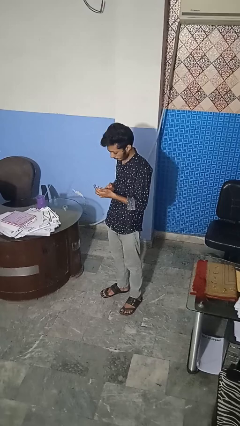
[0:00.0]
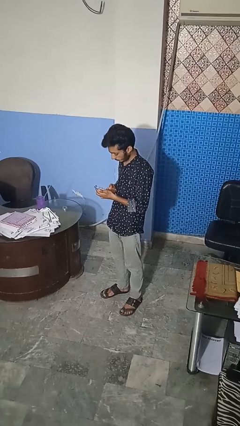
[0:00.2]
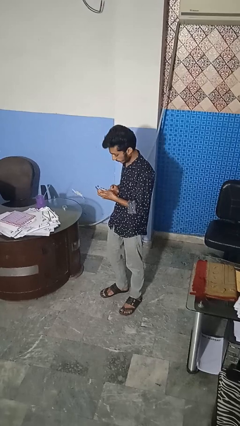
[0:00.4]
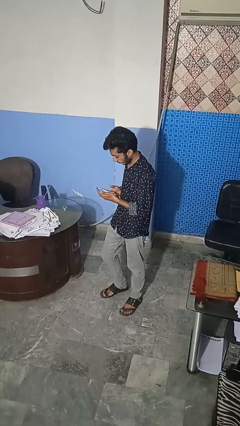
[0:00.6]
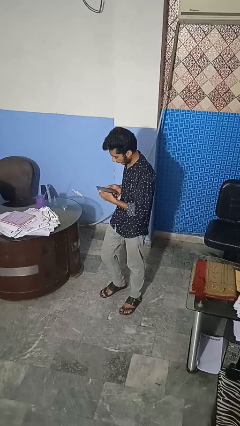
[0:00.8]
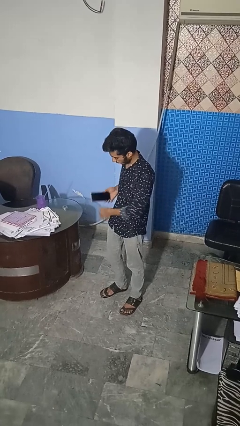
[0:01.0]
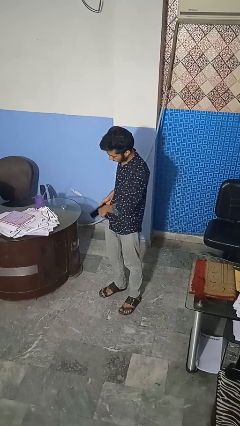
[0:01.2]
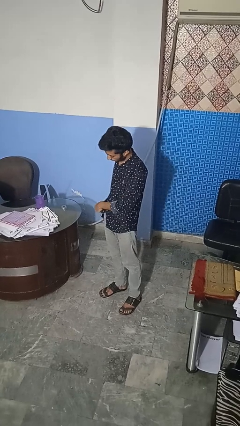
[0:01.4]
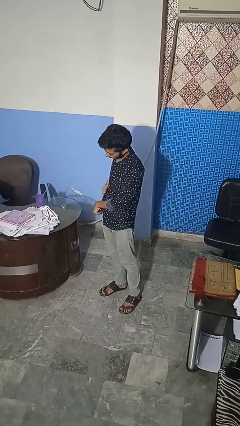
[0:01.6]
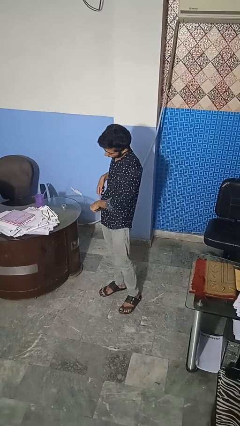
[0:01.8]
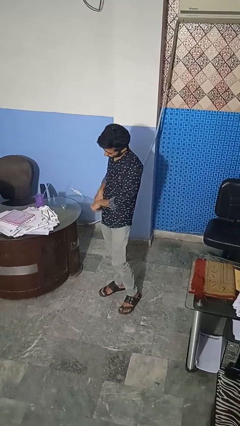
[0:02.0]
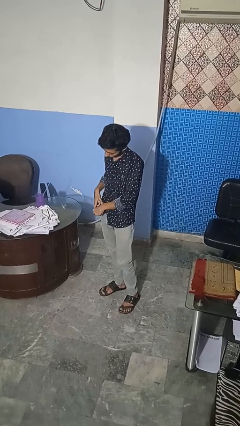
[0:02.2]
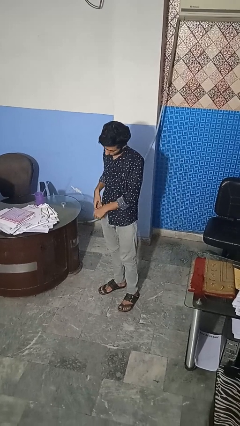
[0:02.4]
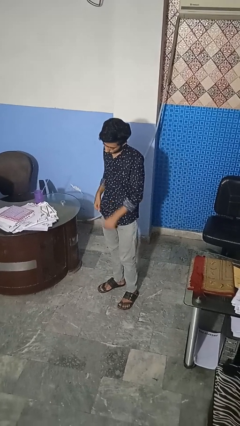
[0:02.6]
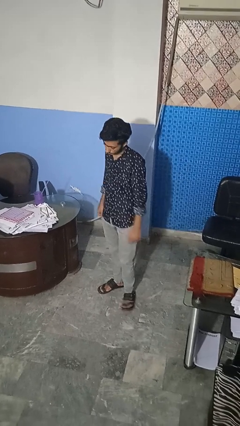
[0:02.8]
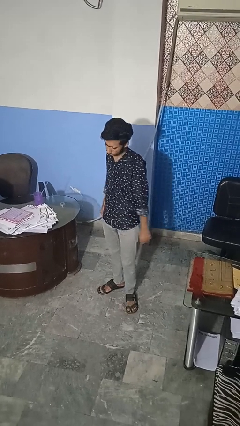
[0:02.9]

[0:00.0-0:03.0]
person puts phone into pocket

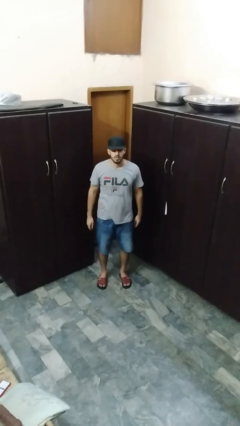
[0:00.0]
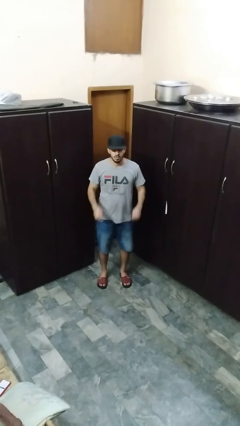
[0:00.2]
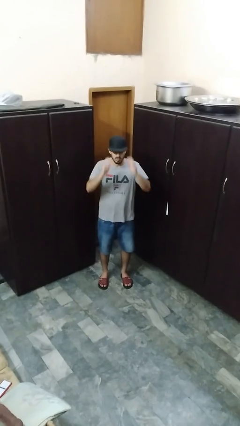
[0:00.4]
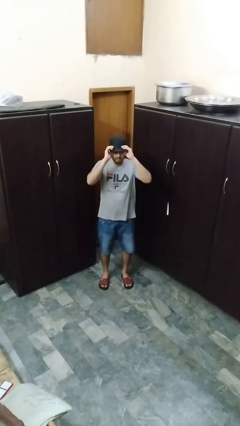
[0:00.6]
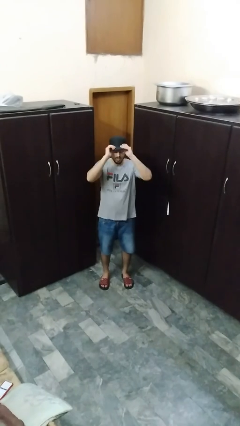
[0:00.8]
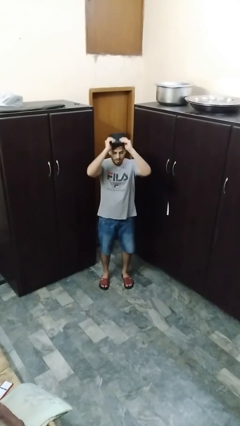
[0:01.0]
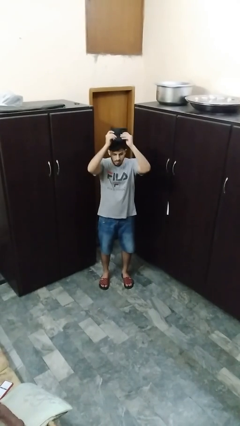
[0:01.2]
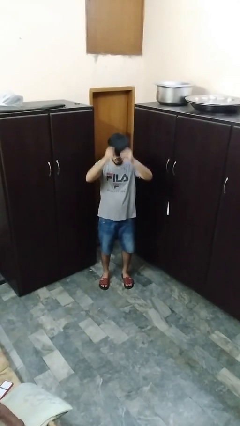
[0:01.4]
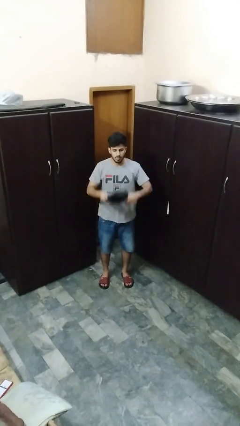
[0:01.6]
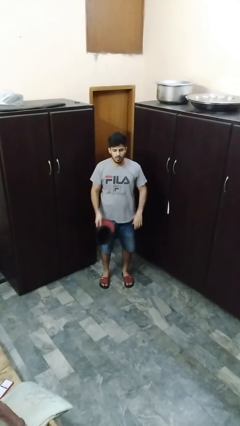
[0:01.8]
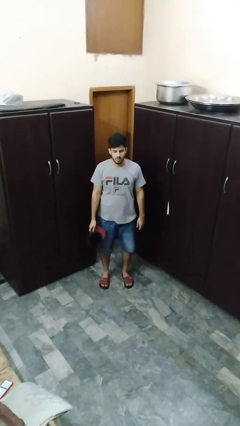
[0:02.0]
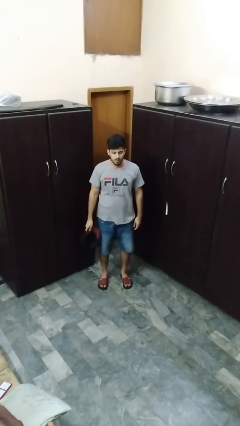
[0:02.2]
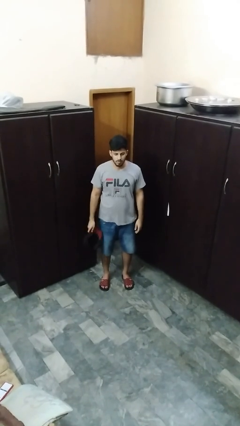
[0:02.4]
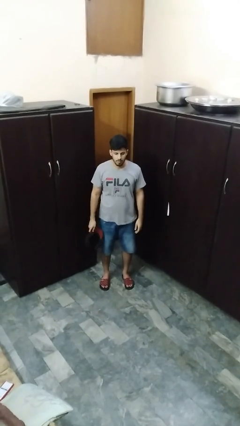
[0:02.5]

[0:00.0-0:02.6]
person takes off hat

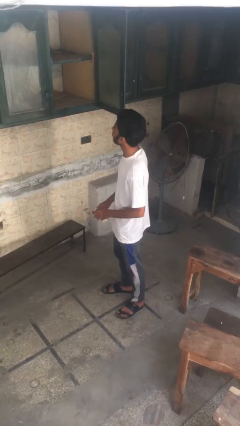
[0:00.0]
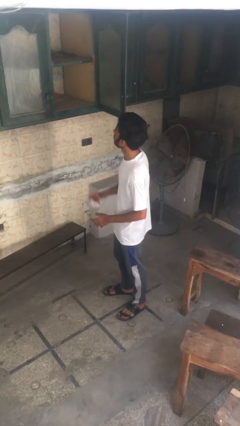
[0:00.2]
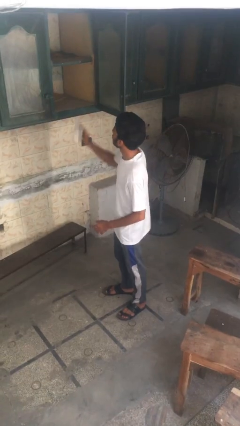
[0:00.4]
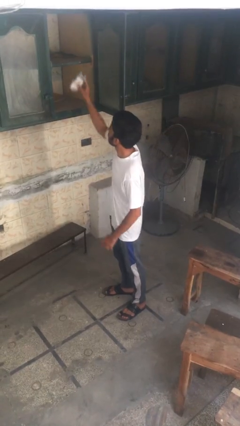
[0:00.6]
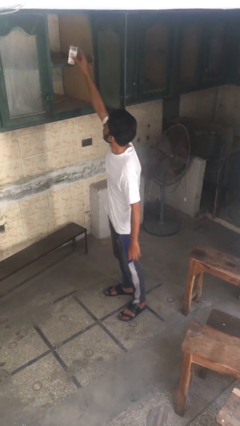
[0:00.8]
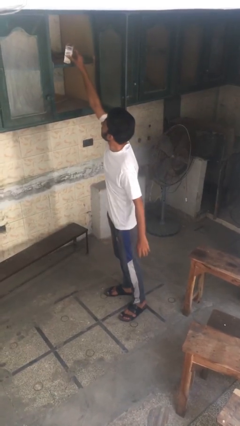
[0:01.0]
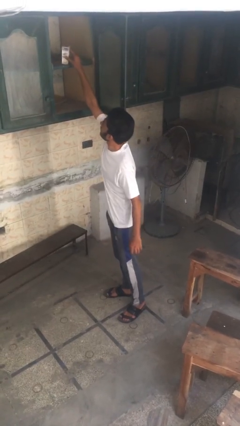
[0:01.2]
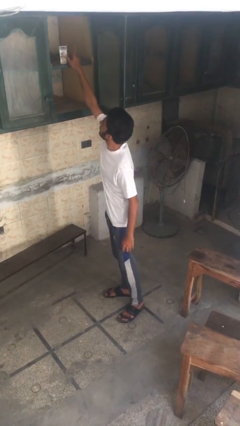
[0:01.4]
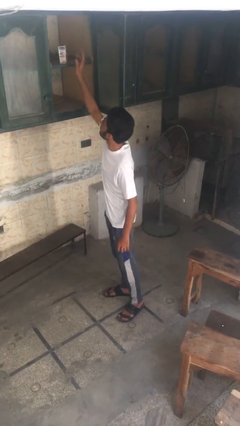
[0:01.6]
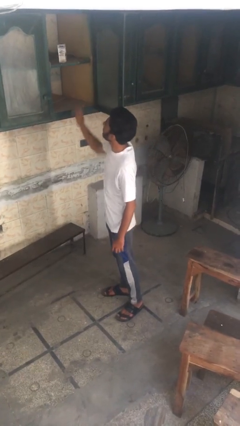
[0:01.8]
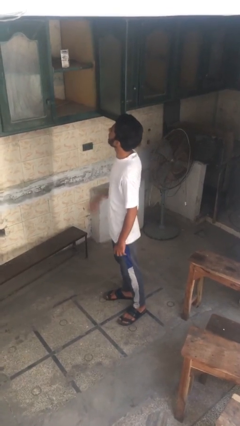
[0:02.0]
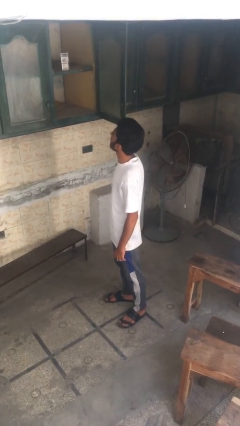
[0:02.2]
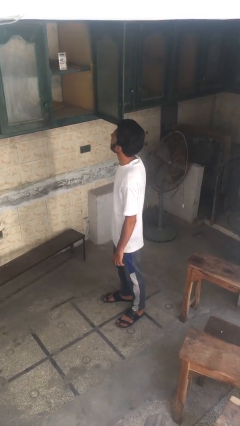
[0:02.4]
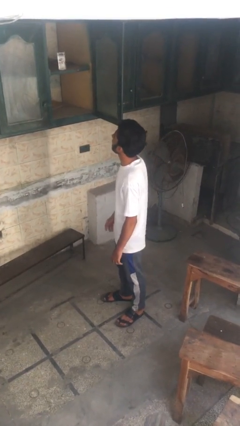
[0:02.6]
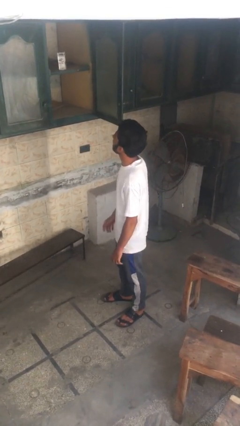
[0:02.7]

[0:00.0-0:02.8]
person puts object in cabinet

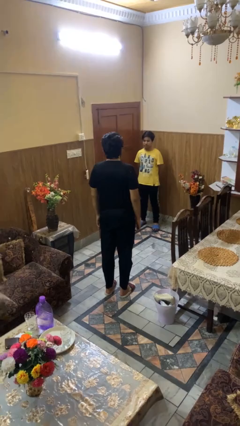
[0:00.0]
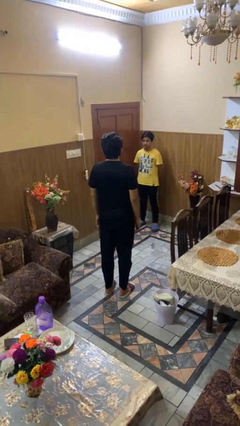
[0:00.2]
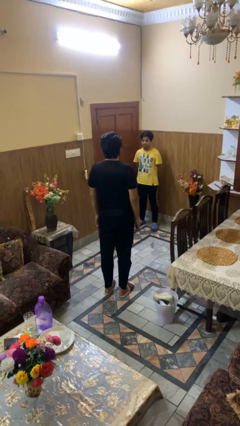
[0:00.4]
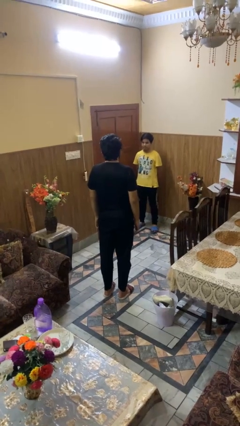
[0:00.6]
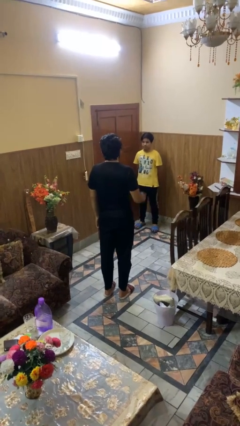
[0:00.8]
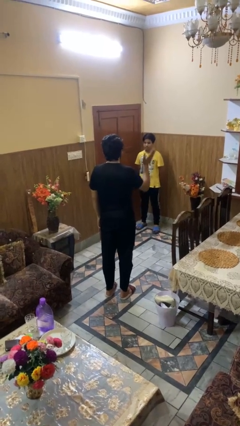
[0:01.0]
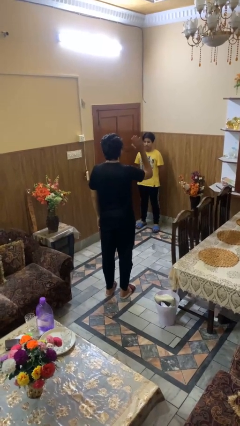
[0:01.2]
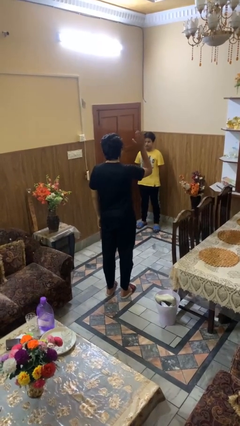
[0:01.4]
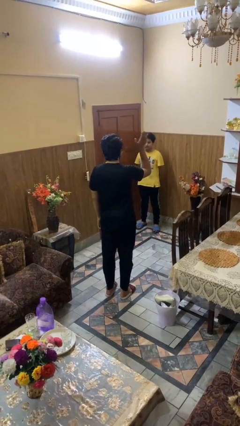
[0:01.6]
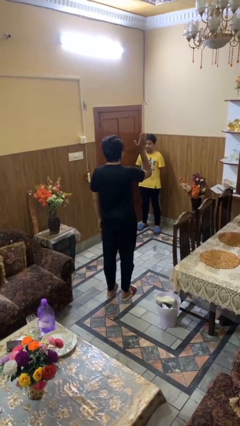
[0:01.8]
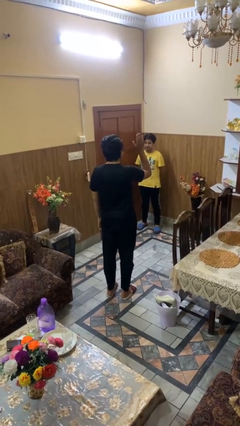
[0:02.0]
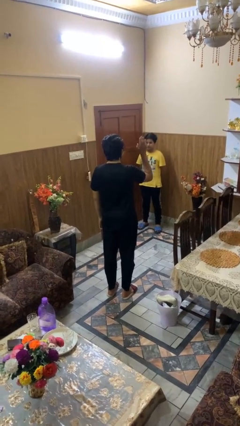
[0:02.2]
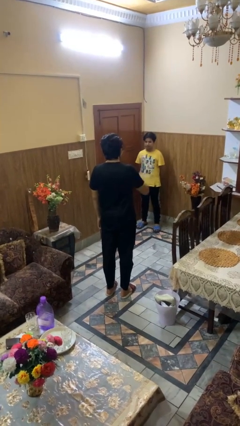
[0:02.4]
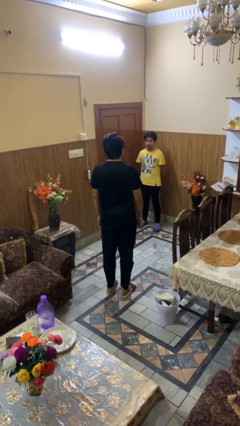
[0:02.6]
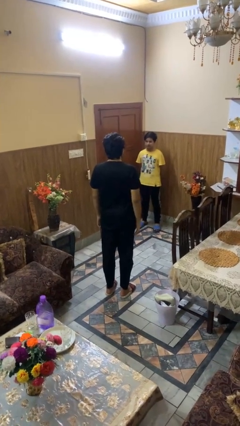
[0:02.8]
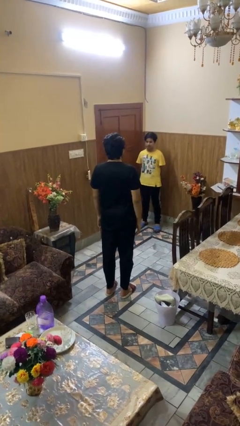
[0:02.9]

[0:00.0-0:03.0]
person waves at person

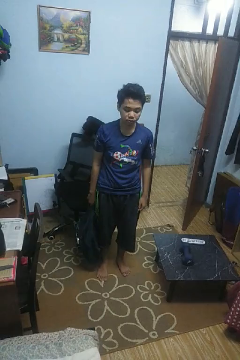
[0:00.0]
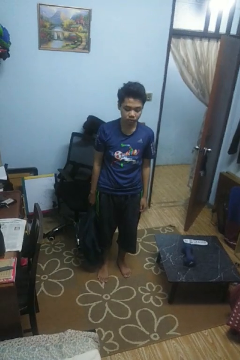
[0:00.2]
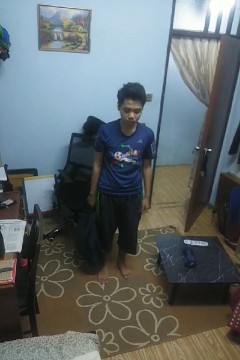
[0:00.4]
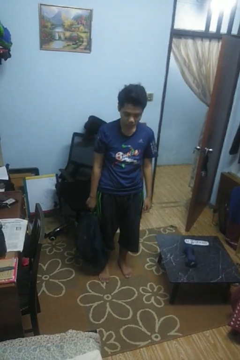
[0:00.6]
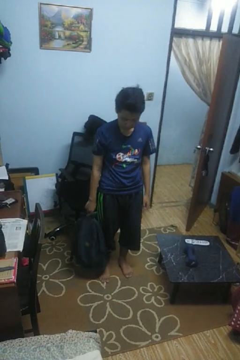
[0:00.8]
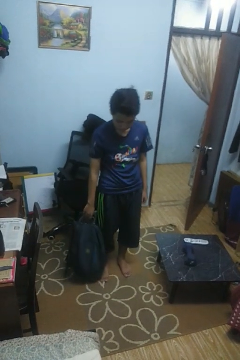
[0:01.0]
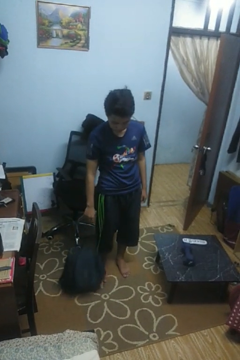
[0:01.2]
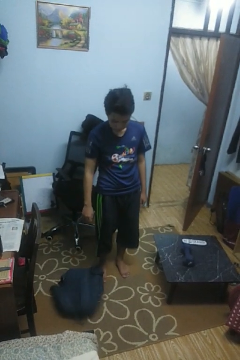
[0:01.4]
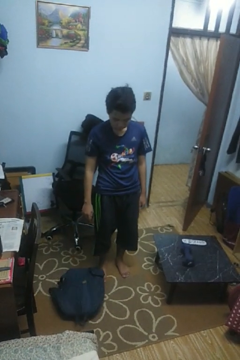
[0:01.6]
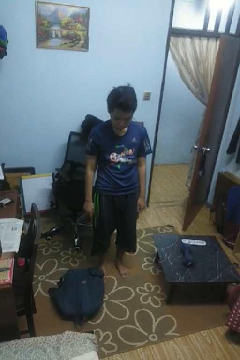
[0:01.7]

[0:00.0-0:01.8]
person drops object

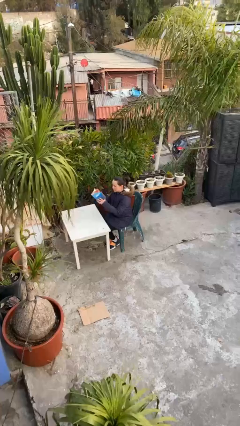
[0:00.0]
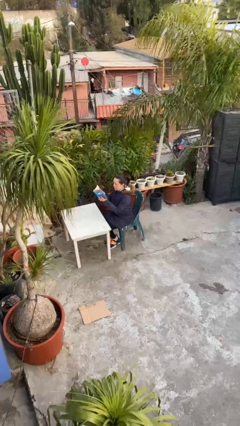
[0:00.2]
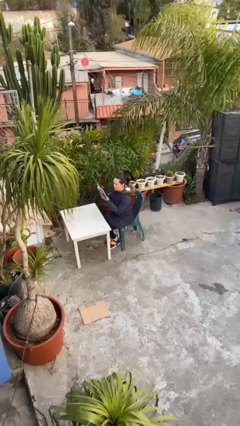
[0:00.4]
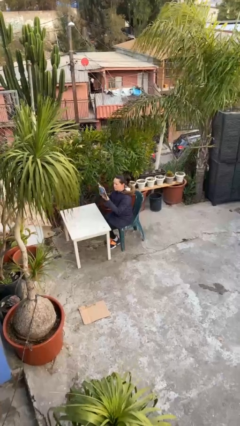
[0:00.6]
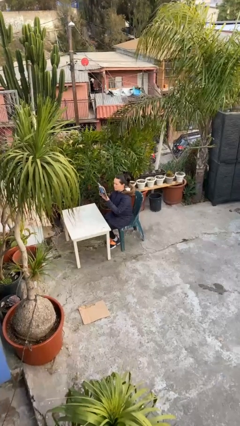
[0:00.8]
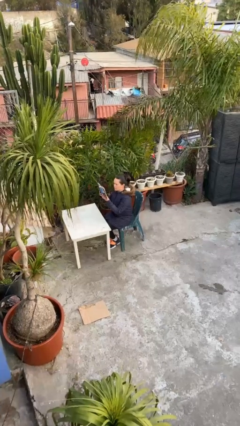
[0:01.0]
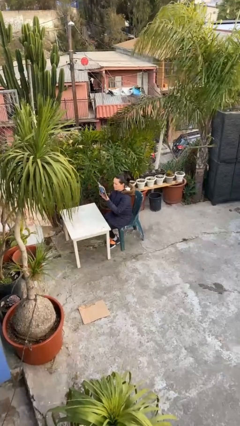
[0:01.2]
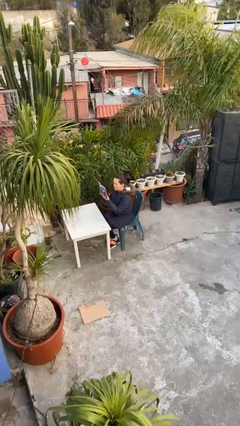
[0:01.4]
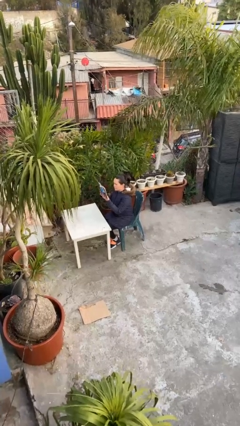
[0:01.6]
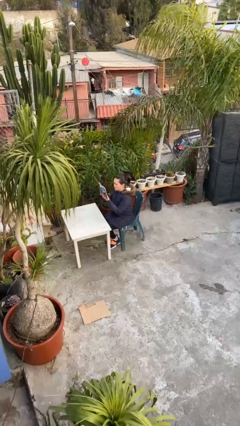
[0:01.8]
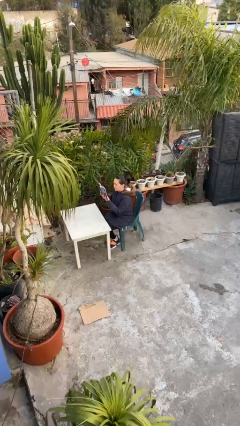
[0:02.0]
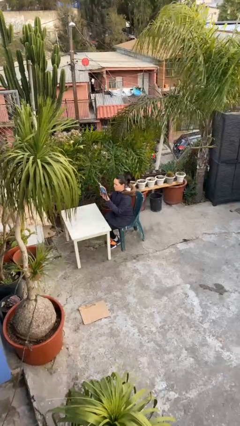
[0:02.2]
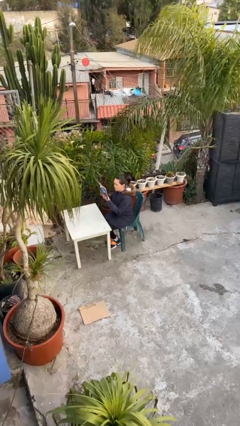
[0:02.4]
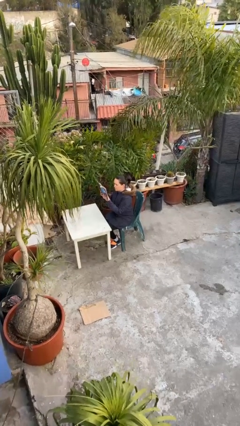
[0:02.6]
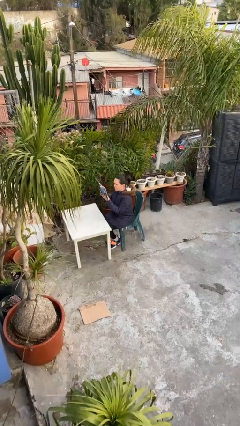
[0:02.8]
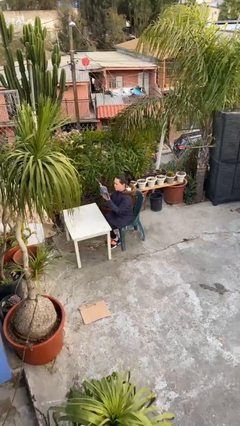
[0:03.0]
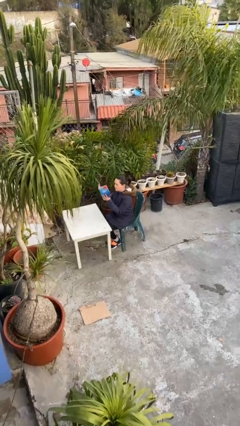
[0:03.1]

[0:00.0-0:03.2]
person reads document

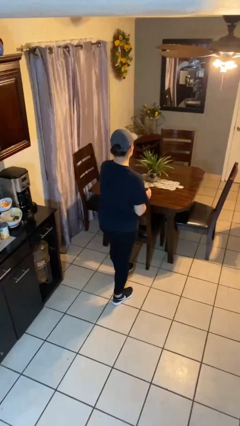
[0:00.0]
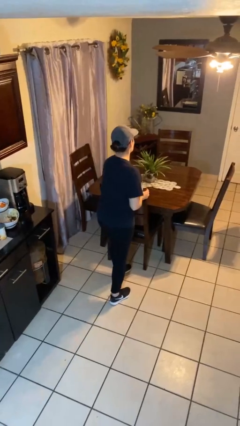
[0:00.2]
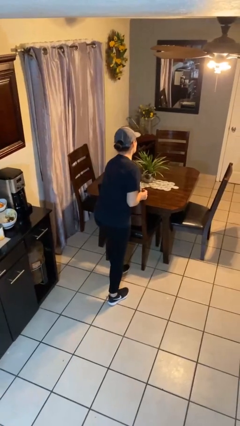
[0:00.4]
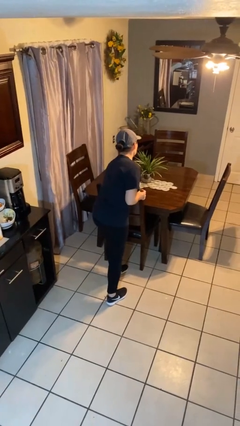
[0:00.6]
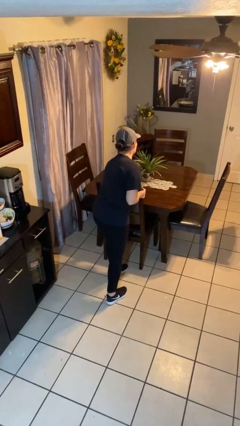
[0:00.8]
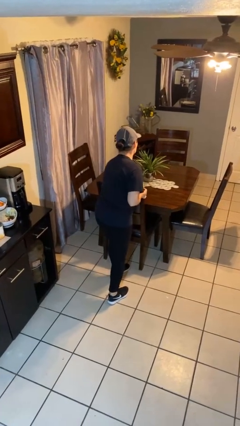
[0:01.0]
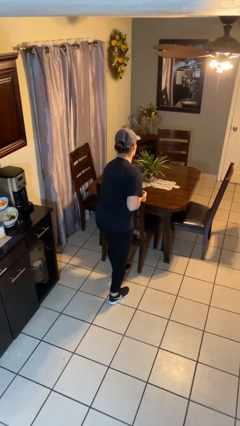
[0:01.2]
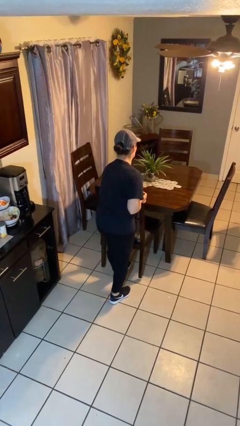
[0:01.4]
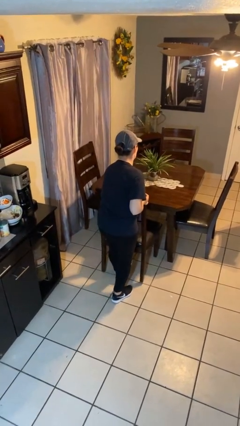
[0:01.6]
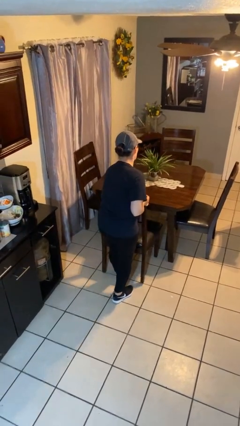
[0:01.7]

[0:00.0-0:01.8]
person pulls out chair
